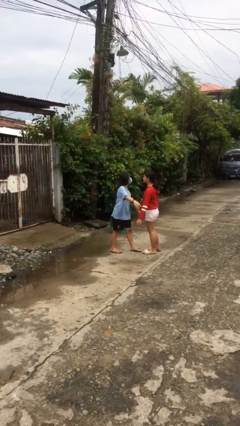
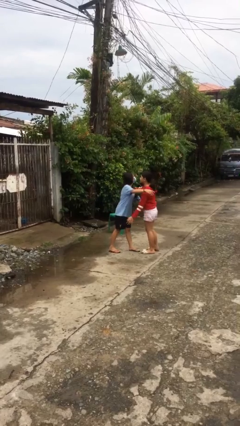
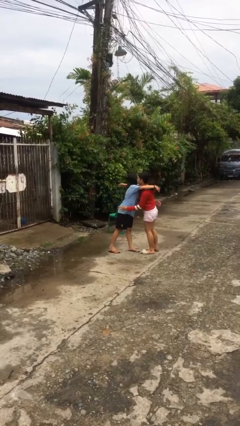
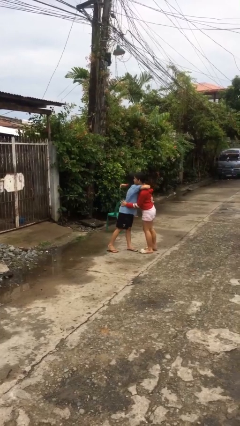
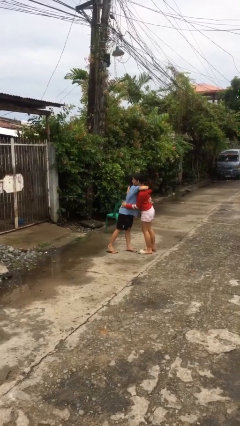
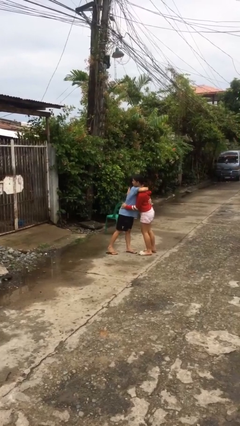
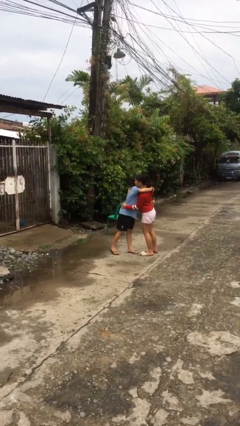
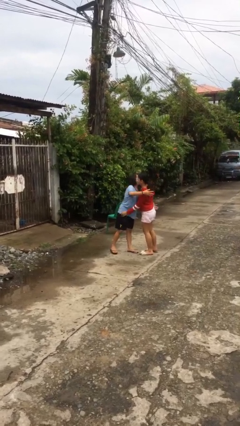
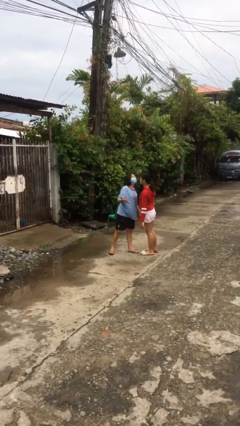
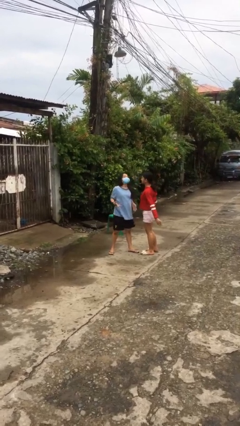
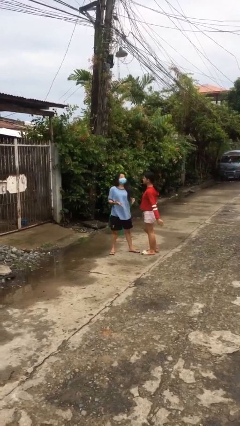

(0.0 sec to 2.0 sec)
person embraces person

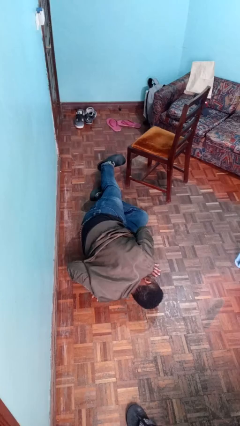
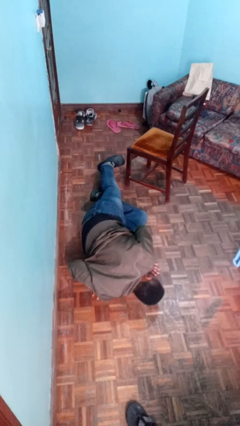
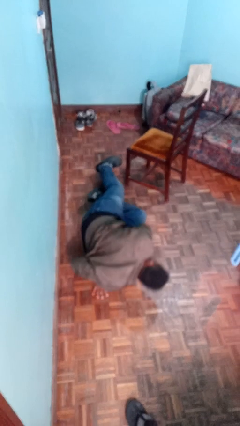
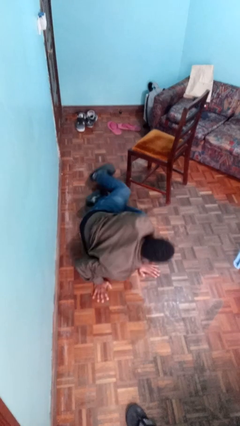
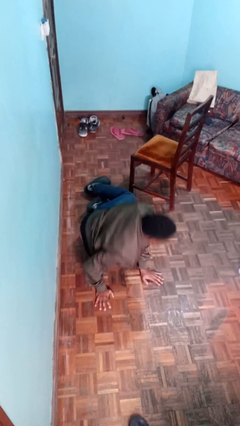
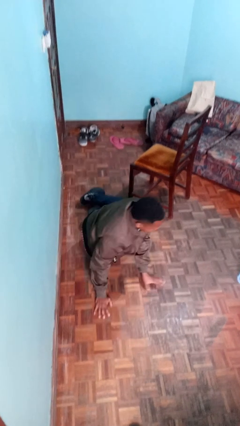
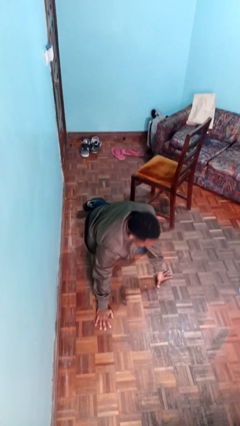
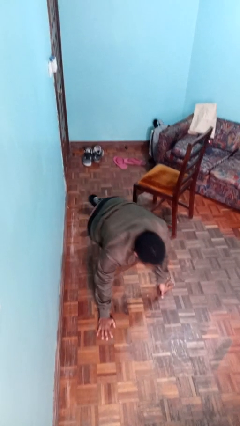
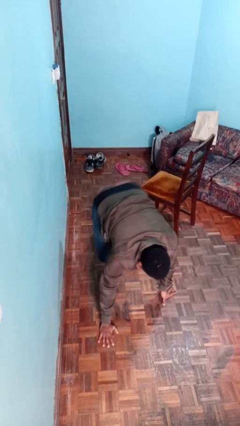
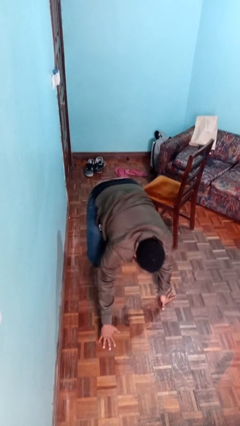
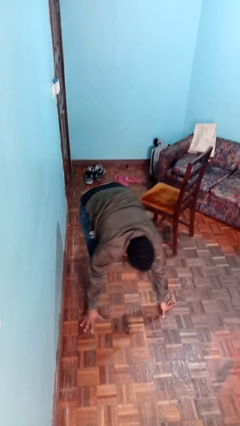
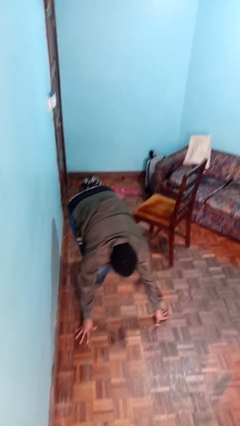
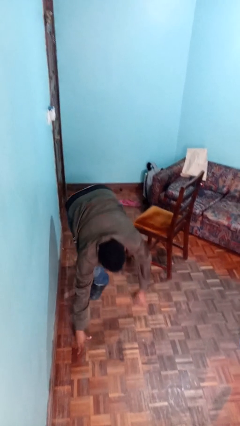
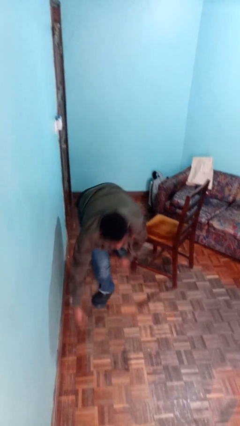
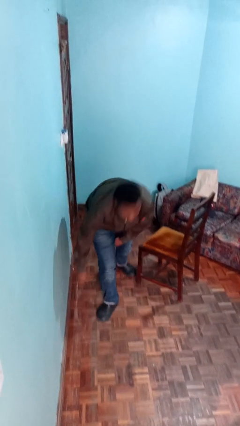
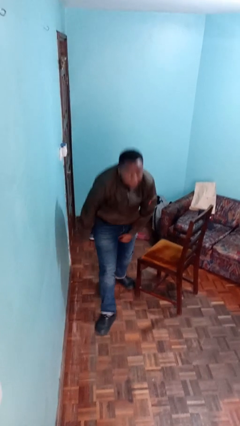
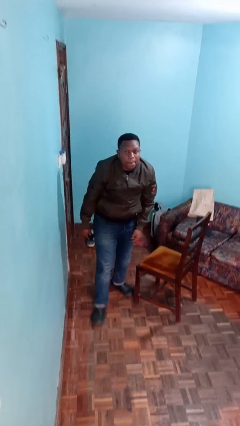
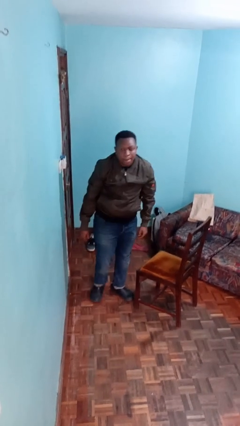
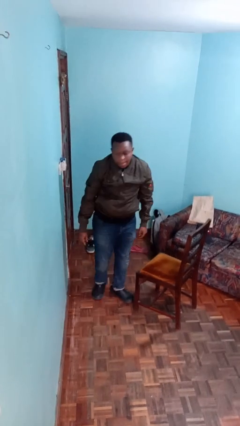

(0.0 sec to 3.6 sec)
person stands up from floor

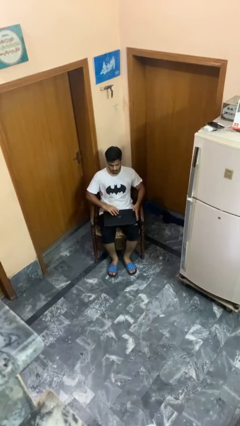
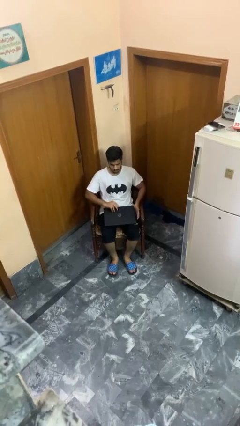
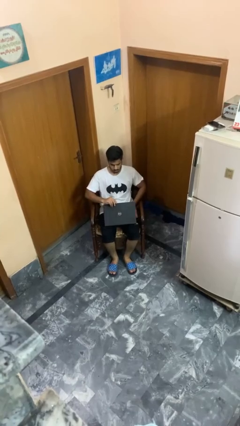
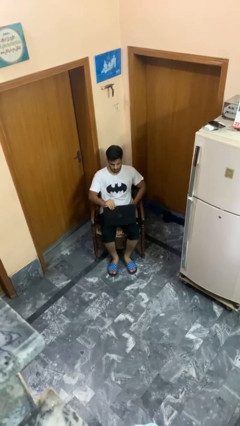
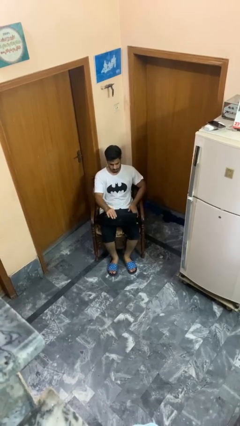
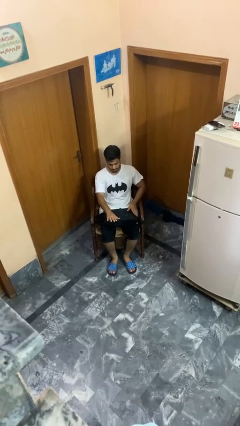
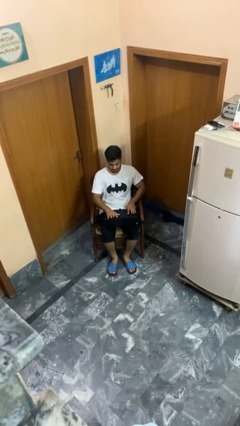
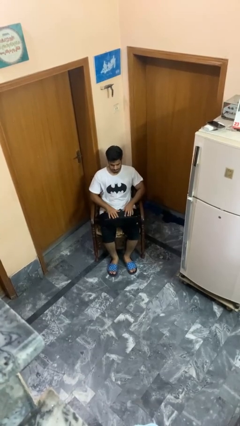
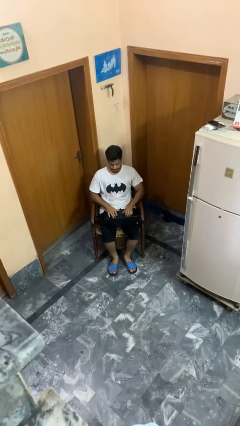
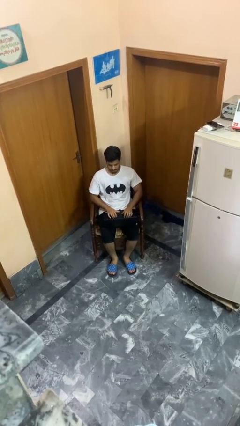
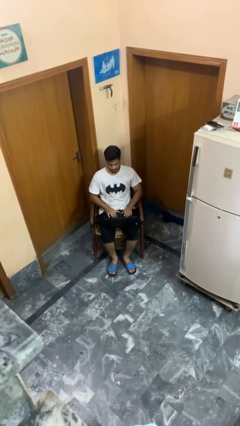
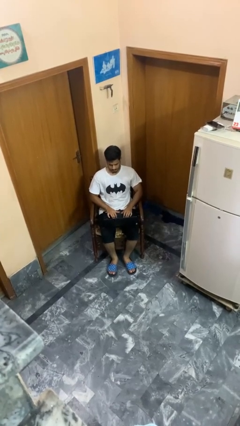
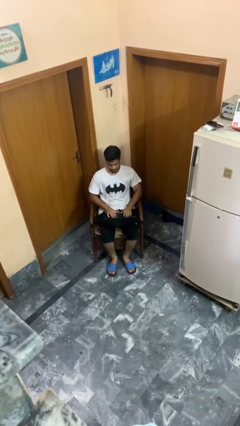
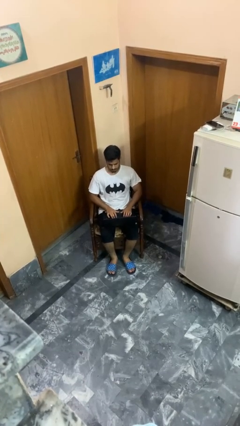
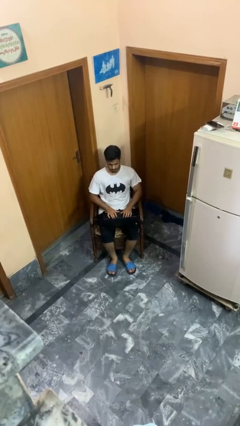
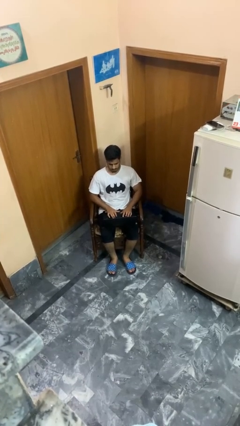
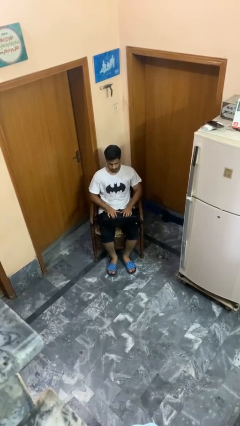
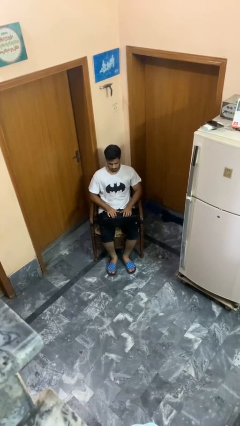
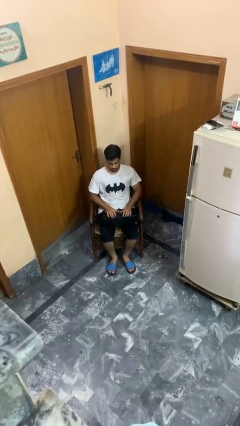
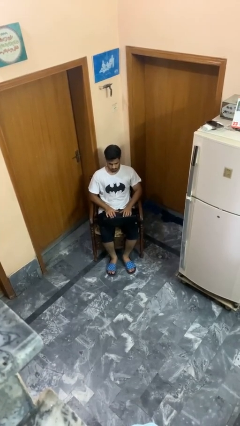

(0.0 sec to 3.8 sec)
person opens laptop

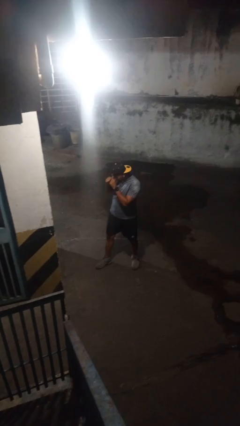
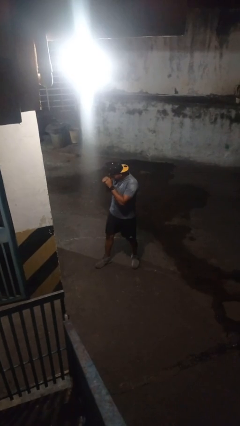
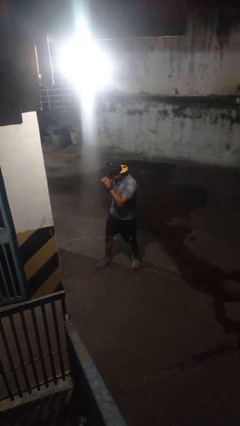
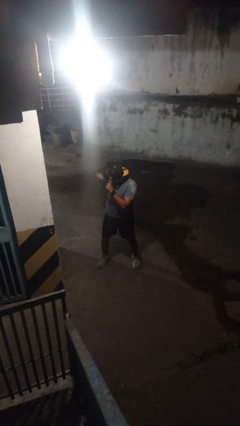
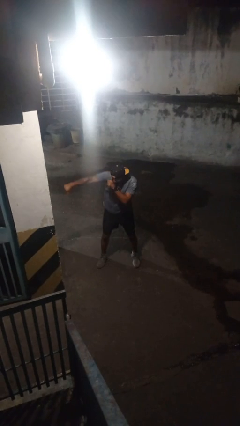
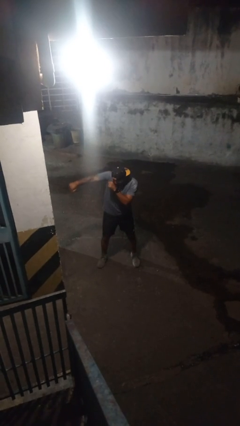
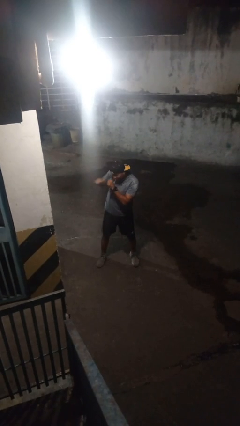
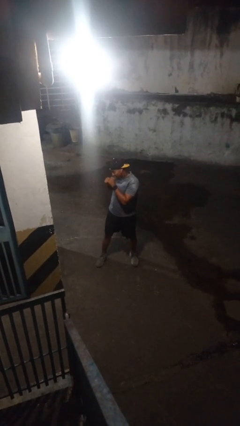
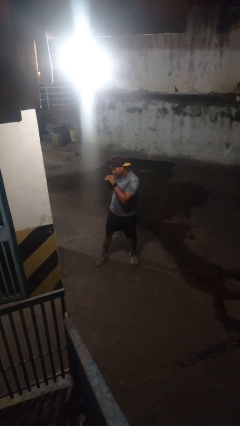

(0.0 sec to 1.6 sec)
person punches

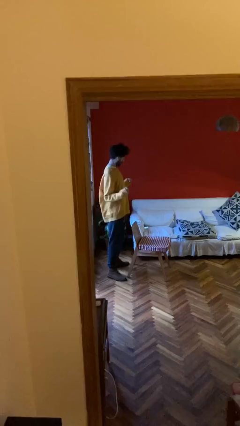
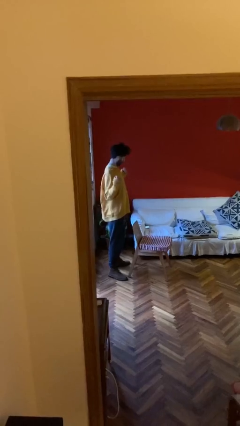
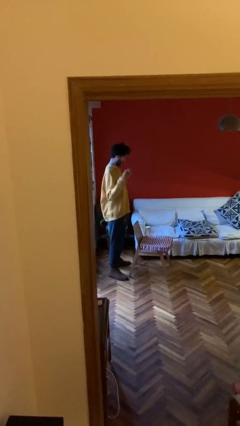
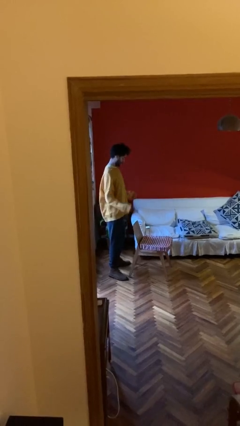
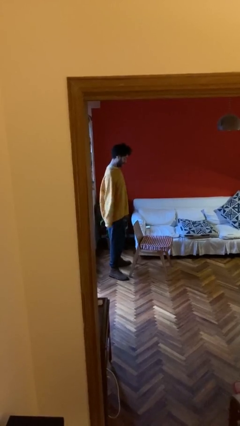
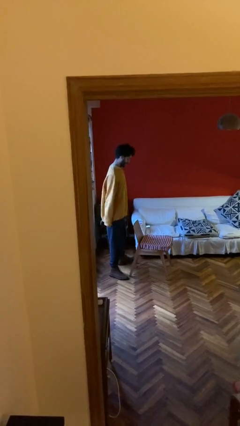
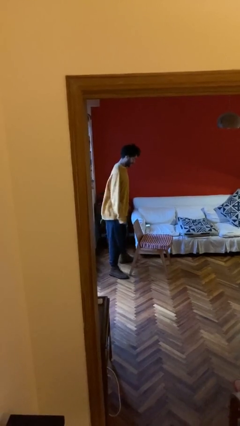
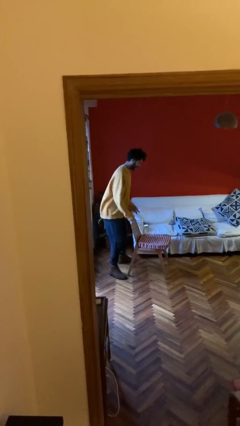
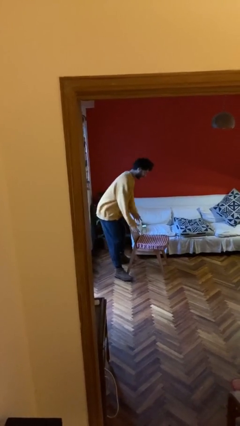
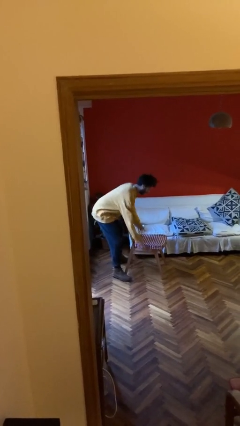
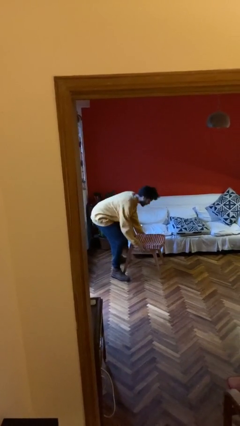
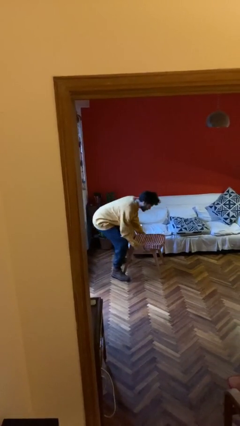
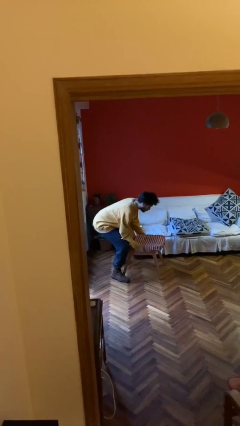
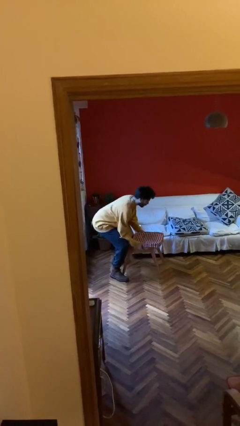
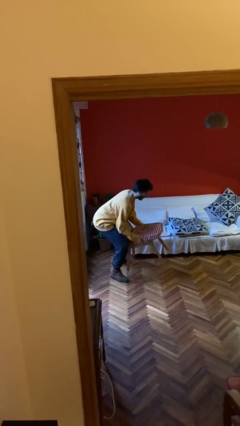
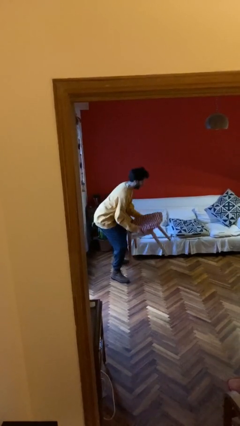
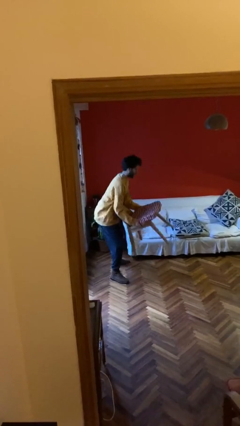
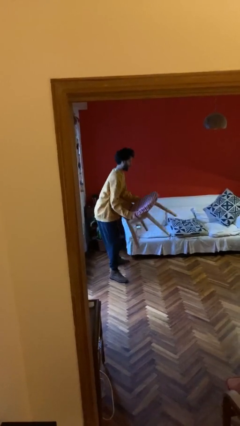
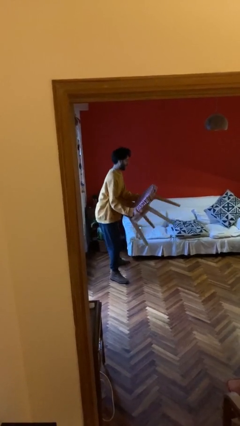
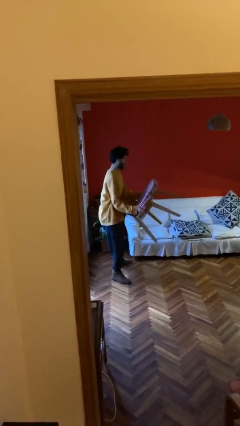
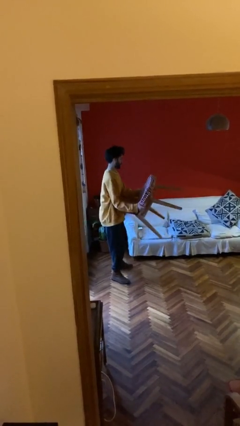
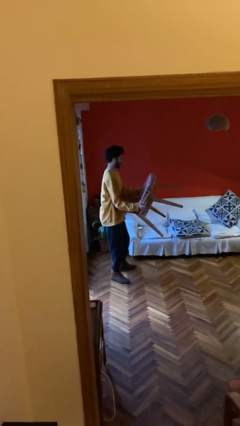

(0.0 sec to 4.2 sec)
person picks up object from floor

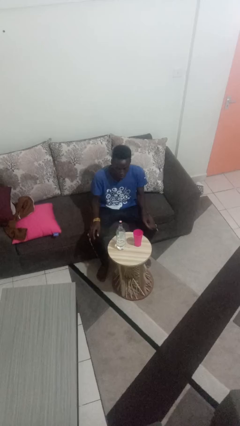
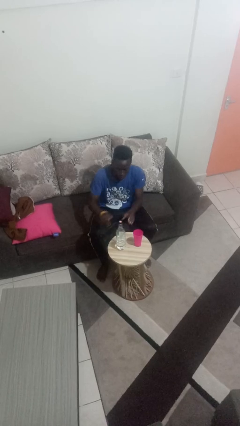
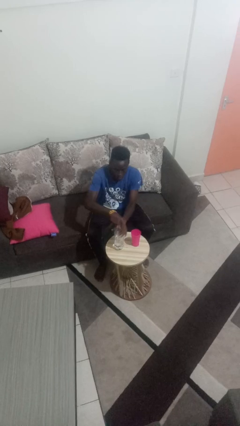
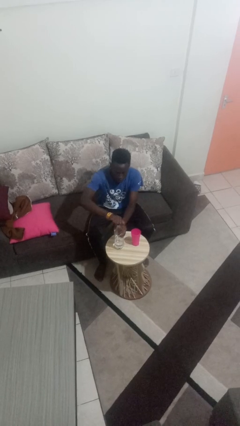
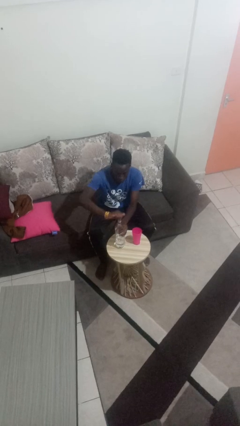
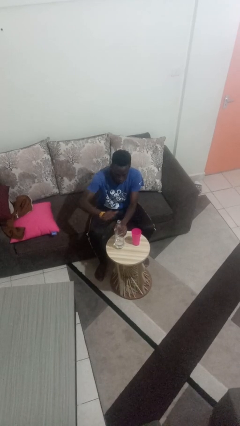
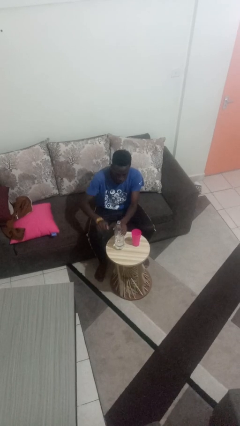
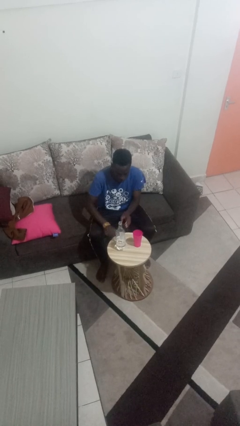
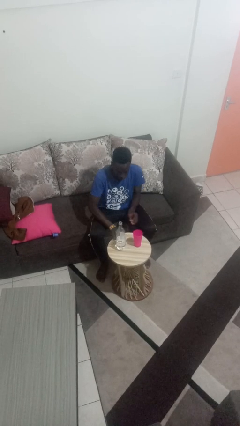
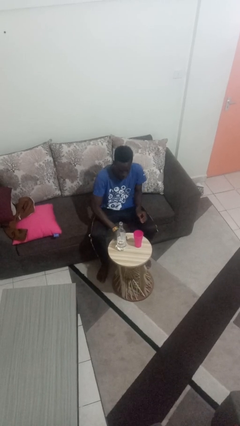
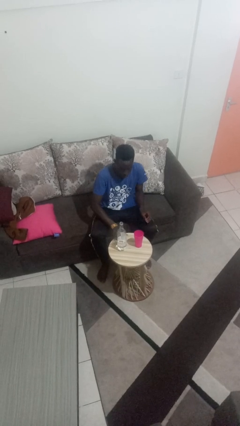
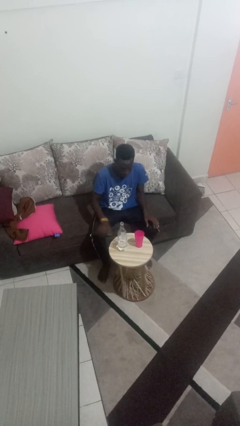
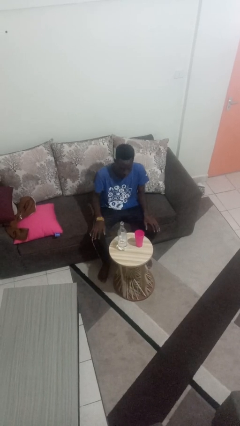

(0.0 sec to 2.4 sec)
person unscrews lid from bottle
